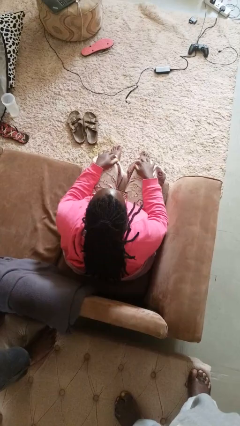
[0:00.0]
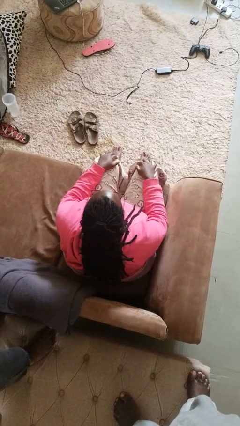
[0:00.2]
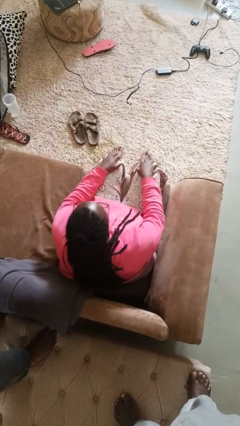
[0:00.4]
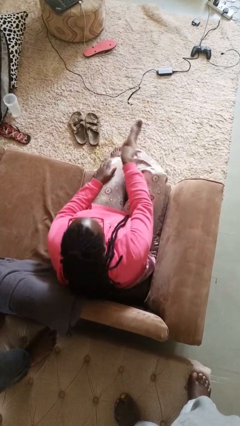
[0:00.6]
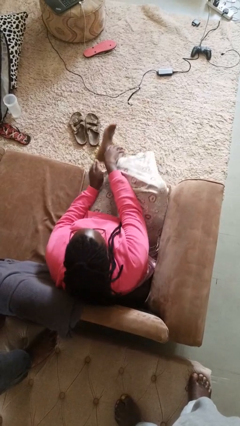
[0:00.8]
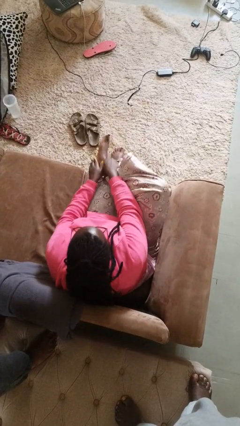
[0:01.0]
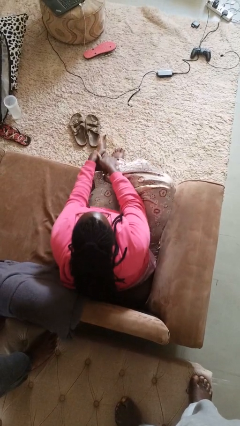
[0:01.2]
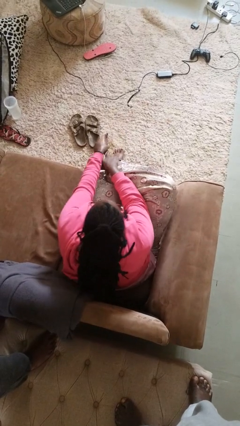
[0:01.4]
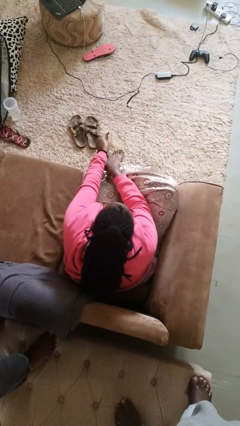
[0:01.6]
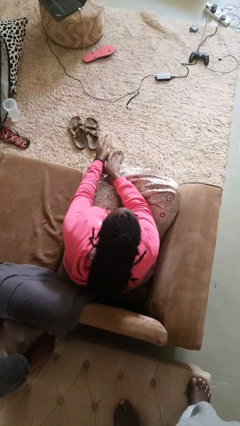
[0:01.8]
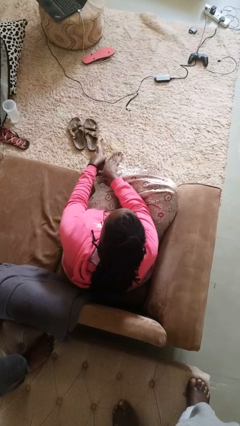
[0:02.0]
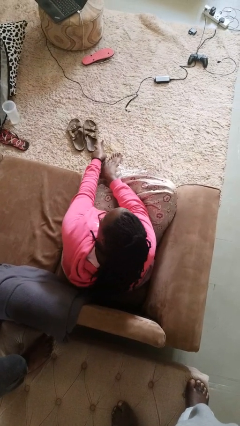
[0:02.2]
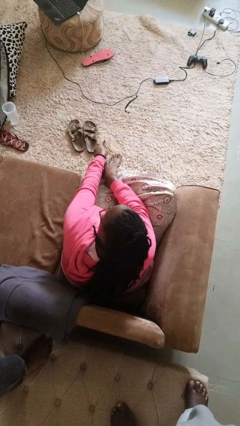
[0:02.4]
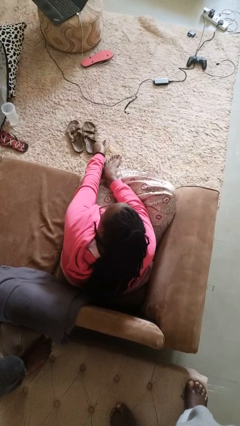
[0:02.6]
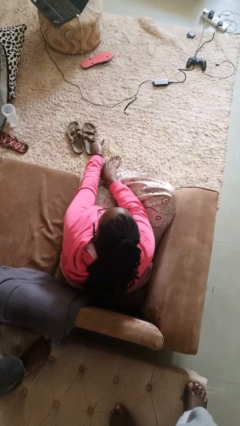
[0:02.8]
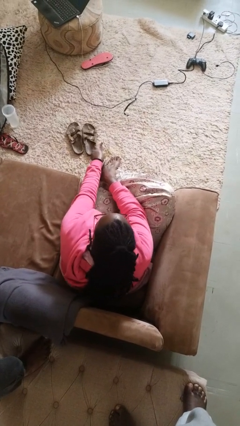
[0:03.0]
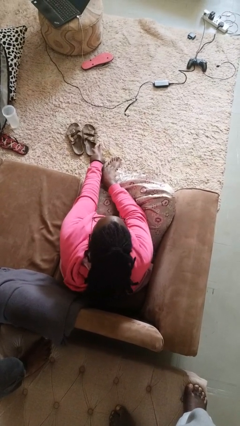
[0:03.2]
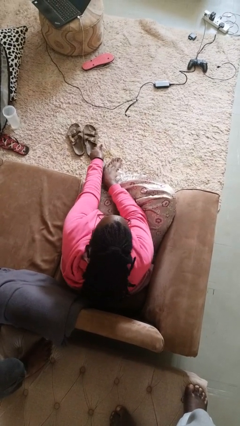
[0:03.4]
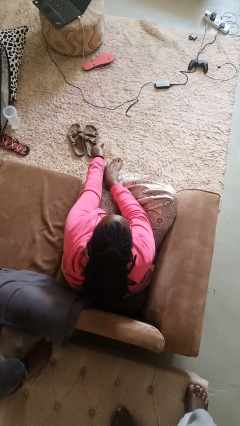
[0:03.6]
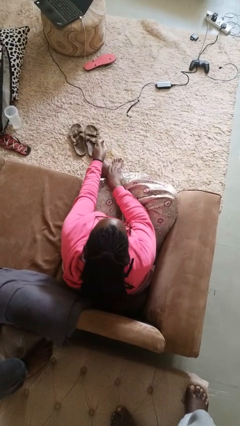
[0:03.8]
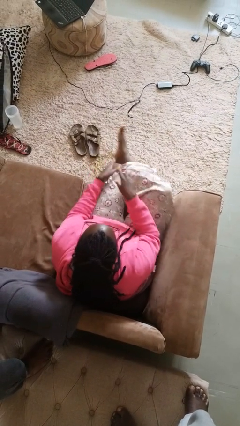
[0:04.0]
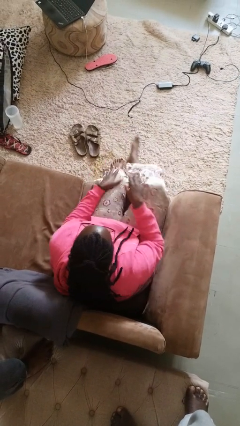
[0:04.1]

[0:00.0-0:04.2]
person rubs foot

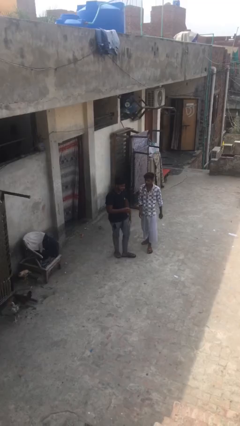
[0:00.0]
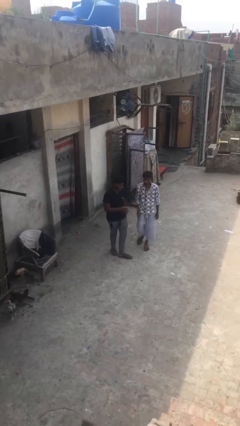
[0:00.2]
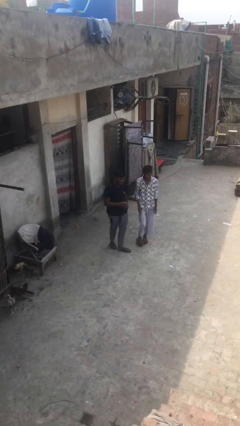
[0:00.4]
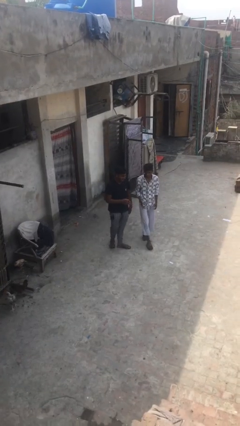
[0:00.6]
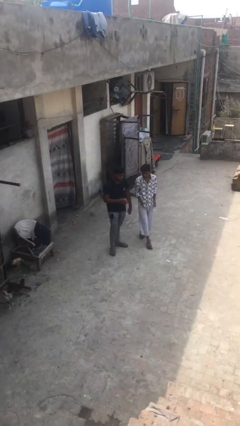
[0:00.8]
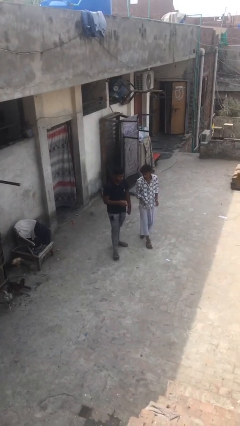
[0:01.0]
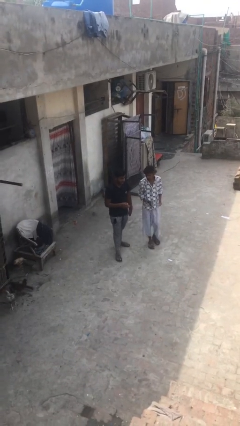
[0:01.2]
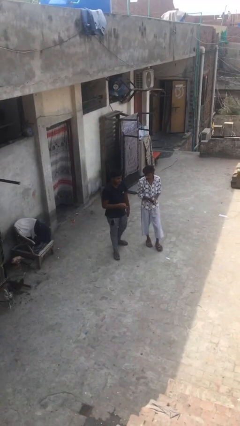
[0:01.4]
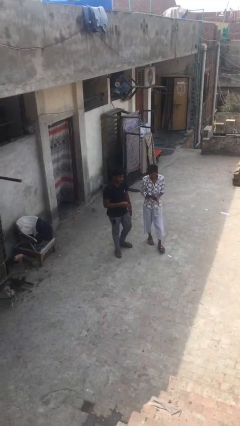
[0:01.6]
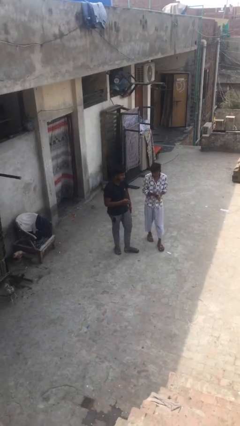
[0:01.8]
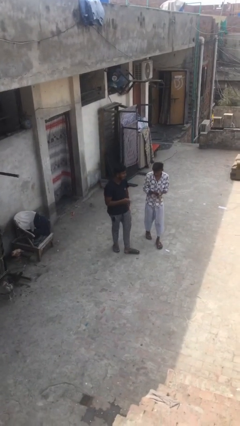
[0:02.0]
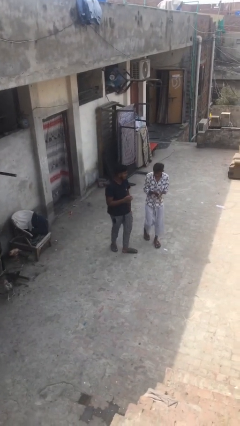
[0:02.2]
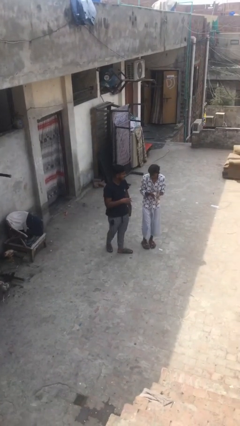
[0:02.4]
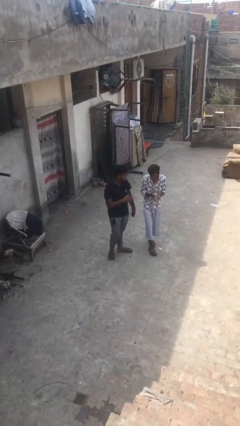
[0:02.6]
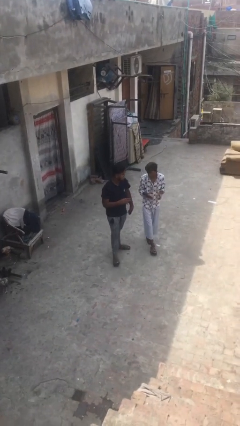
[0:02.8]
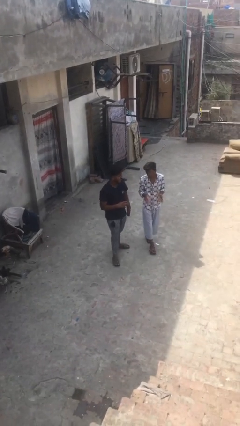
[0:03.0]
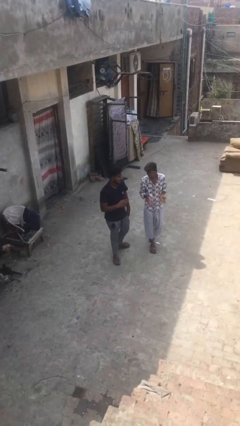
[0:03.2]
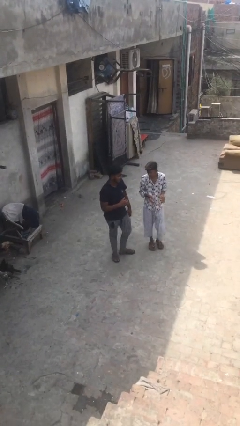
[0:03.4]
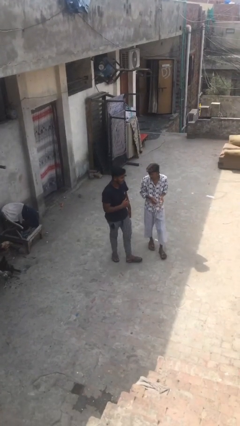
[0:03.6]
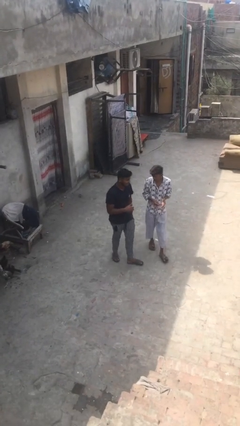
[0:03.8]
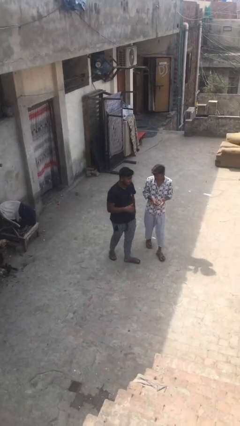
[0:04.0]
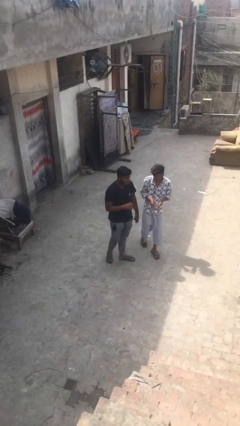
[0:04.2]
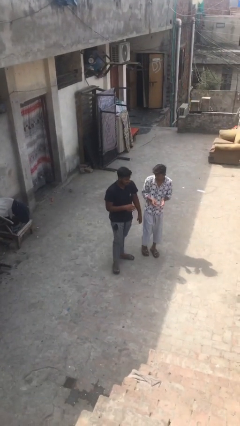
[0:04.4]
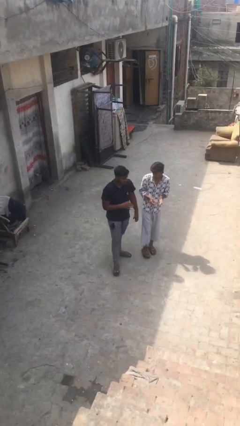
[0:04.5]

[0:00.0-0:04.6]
person talks to person

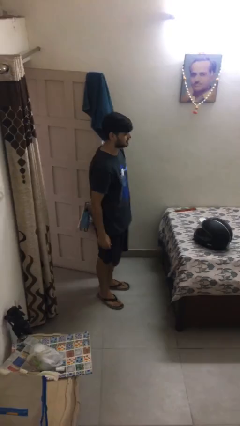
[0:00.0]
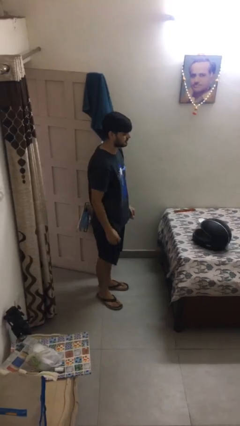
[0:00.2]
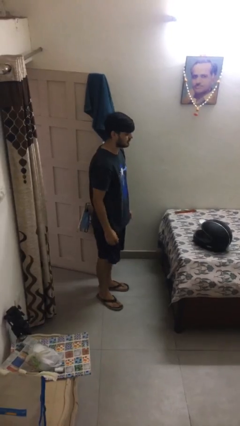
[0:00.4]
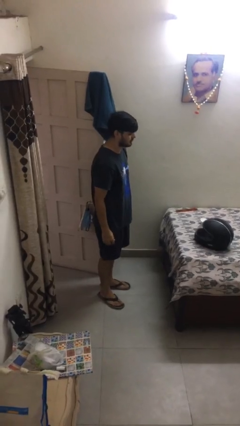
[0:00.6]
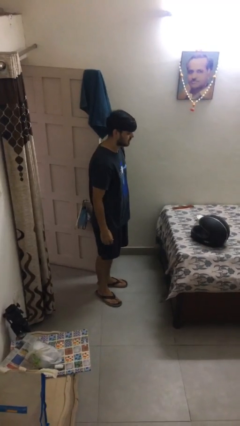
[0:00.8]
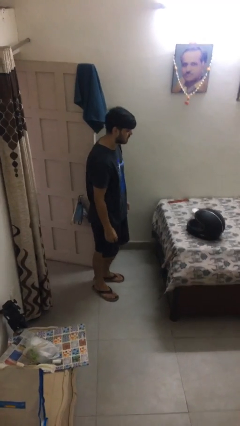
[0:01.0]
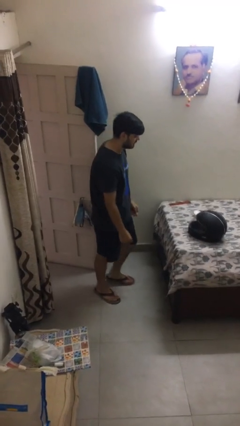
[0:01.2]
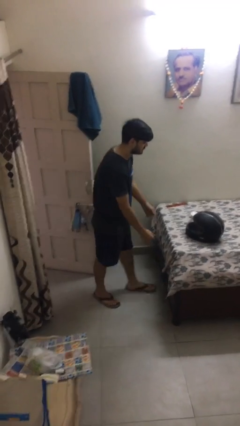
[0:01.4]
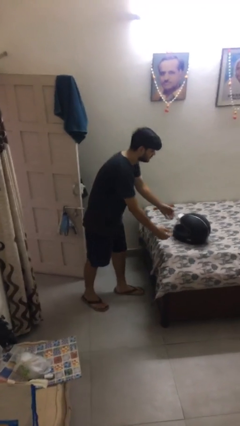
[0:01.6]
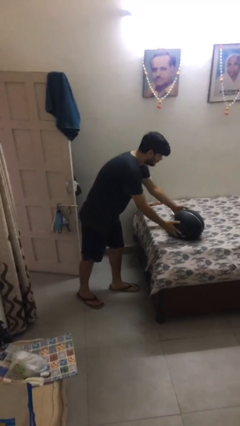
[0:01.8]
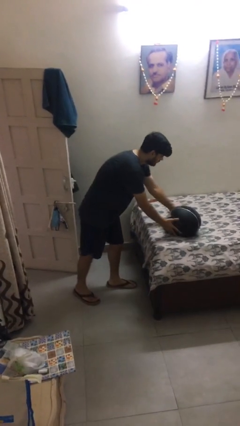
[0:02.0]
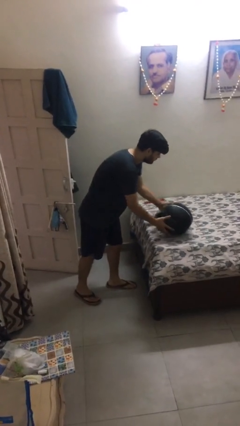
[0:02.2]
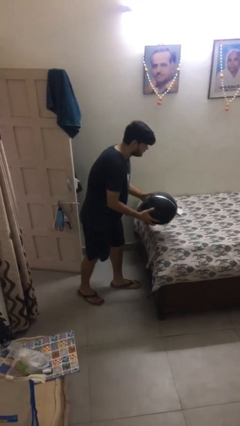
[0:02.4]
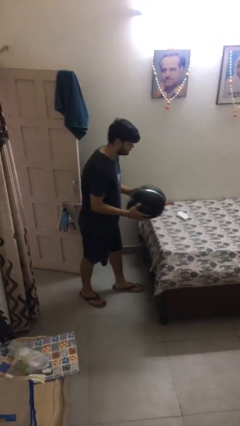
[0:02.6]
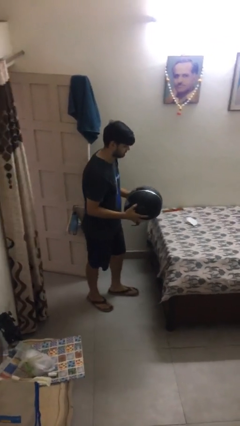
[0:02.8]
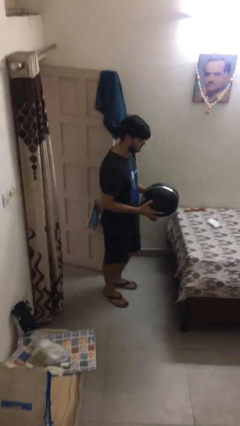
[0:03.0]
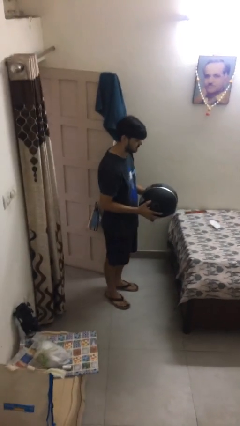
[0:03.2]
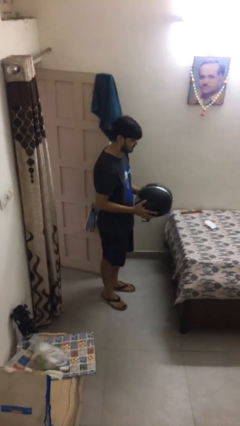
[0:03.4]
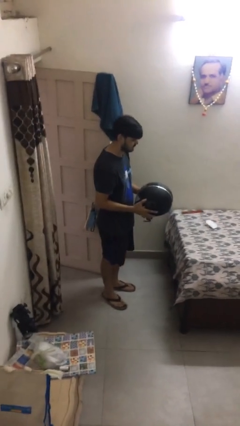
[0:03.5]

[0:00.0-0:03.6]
person picks up object from bed

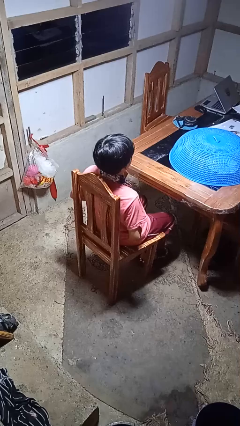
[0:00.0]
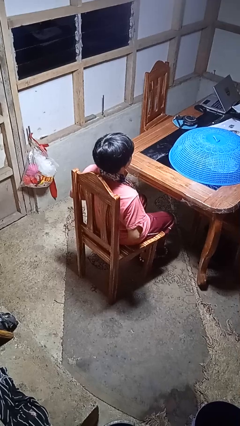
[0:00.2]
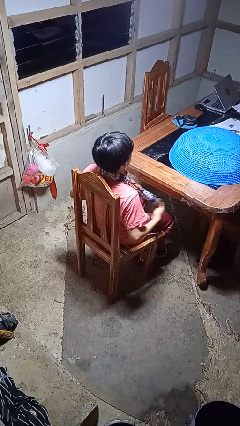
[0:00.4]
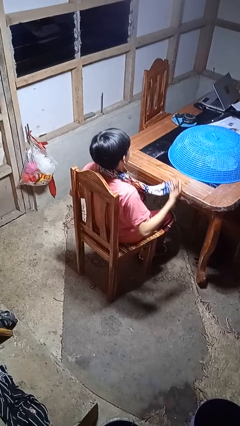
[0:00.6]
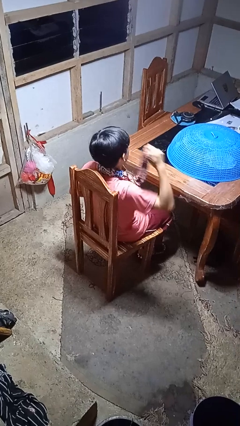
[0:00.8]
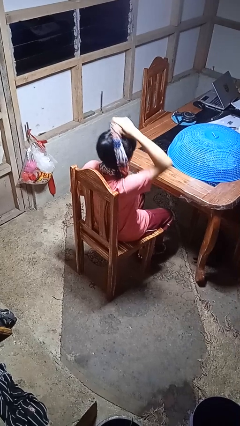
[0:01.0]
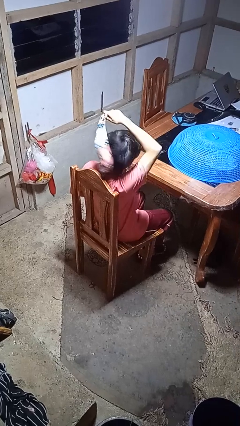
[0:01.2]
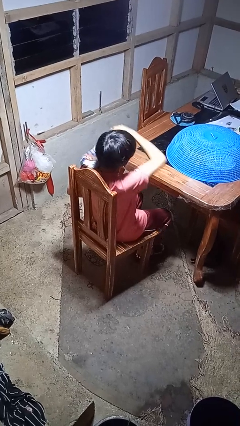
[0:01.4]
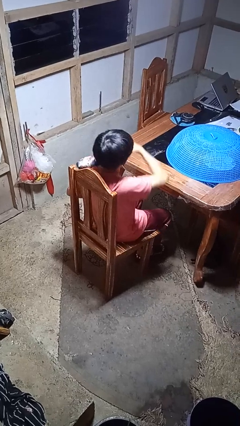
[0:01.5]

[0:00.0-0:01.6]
person takes off scarf

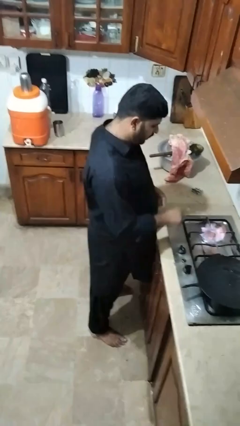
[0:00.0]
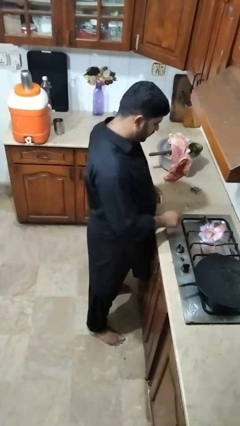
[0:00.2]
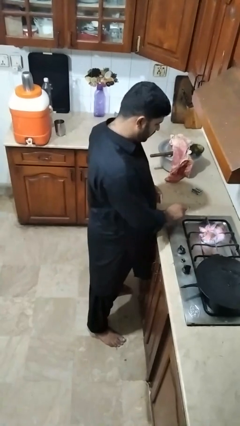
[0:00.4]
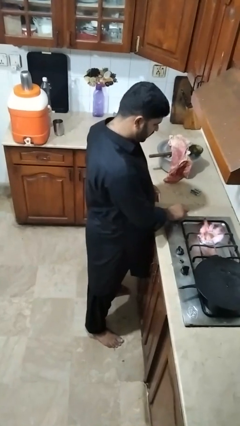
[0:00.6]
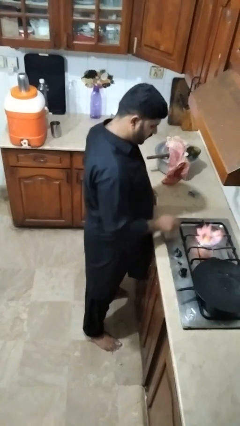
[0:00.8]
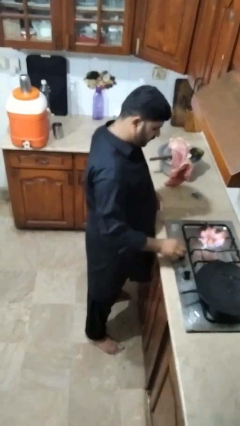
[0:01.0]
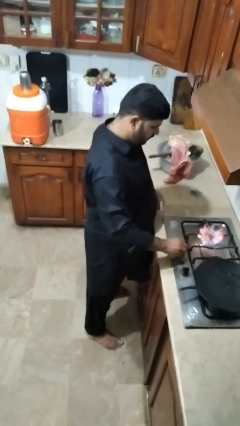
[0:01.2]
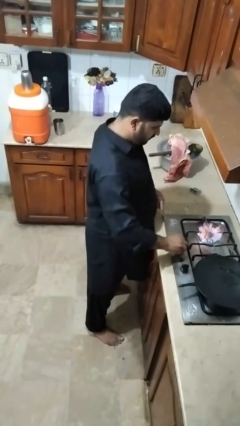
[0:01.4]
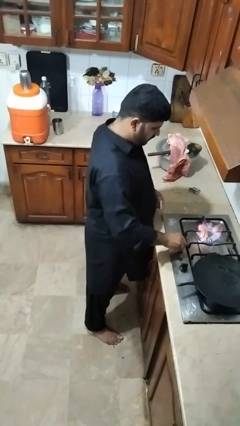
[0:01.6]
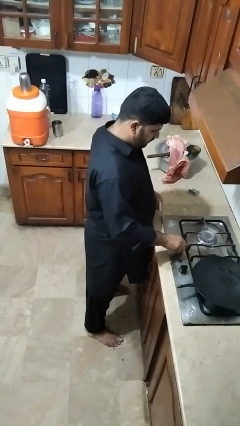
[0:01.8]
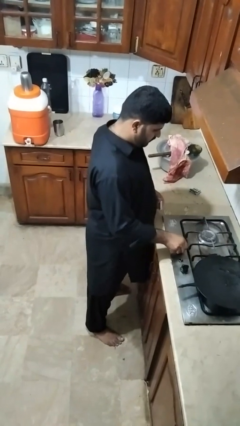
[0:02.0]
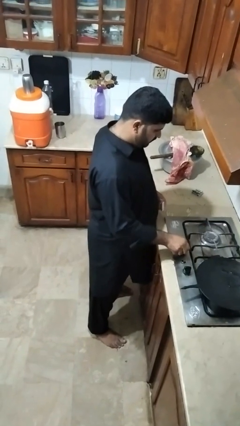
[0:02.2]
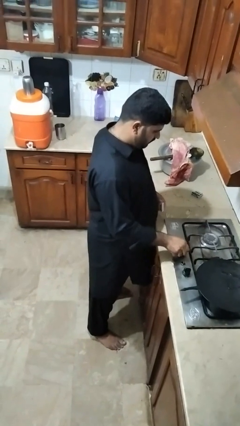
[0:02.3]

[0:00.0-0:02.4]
person turns off stovetop

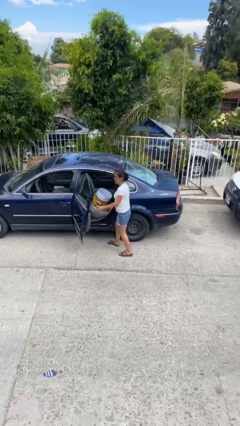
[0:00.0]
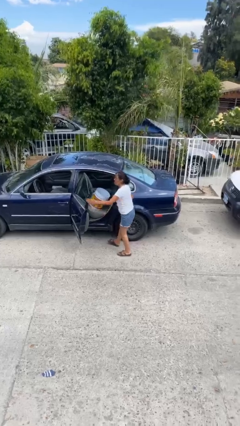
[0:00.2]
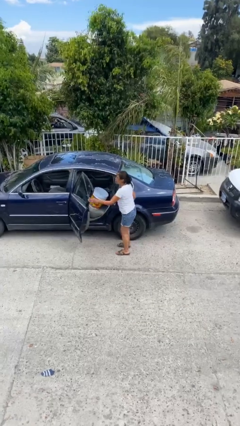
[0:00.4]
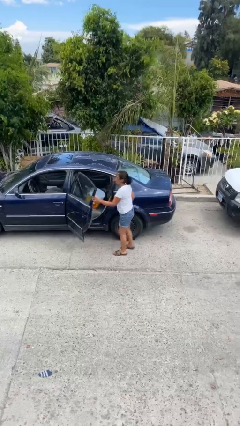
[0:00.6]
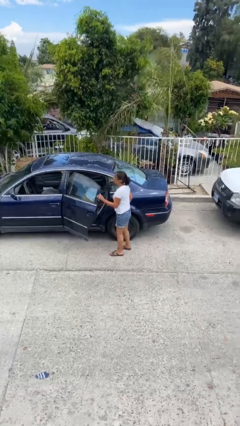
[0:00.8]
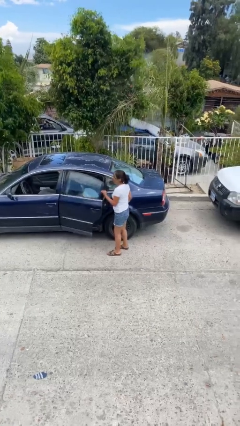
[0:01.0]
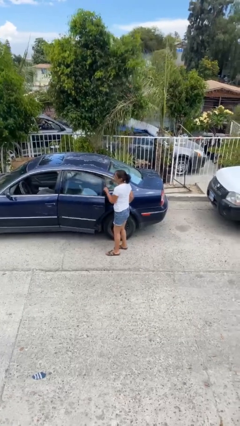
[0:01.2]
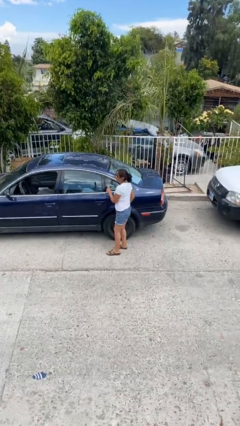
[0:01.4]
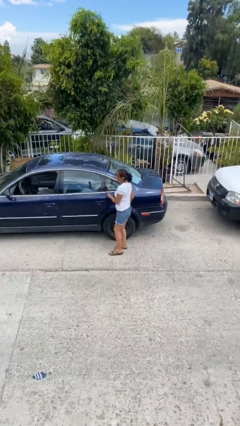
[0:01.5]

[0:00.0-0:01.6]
person closes car door
